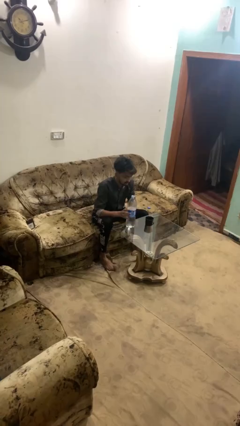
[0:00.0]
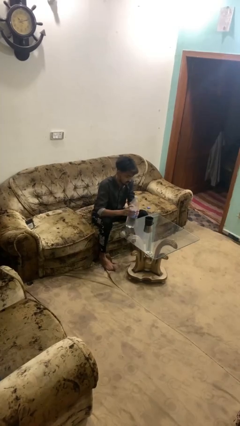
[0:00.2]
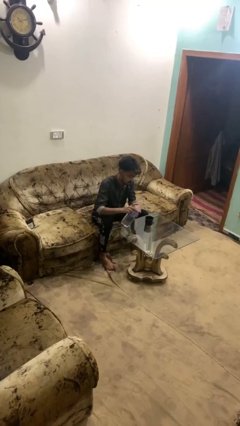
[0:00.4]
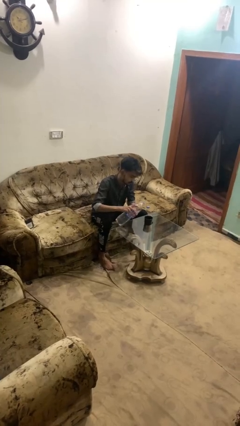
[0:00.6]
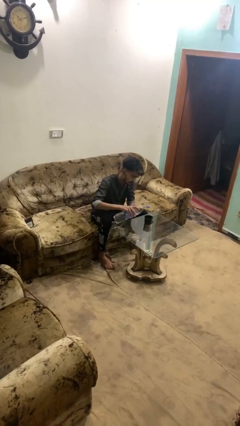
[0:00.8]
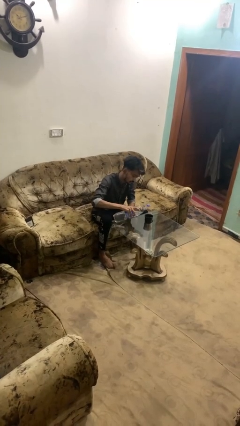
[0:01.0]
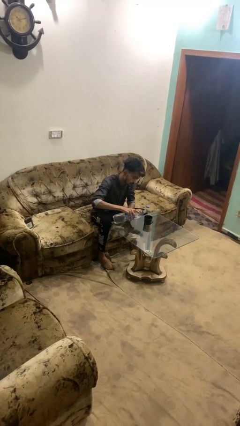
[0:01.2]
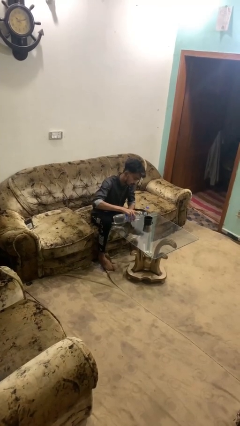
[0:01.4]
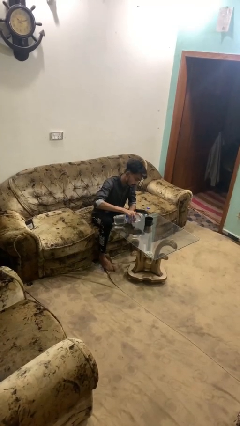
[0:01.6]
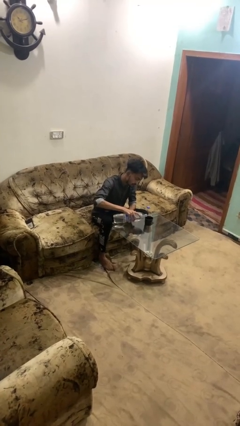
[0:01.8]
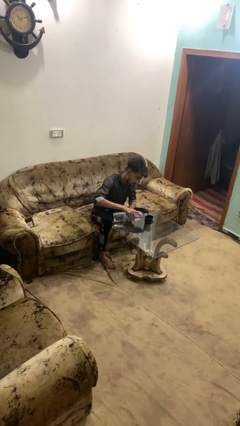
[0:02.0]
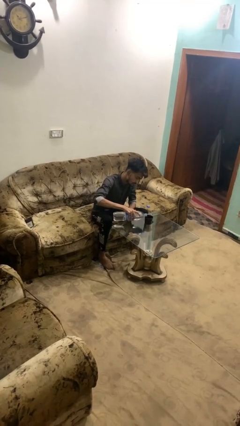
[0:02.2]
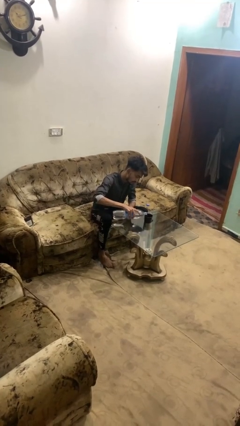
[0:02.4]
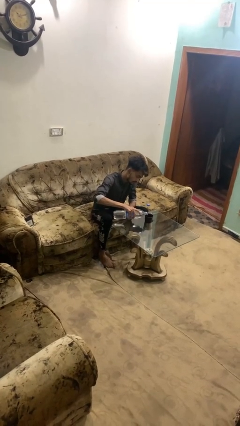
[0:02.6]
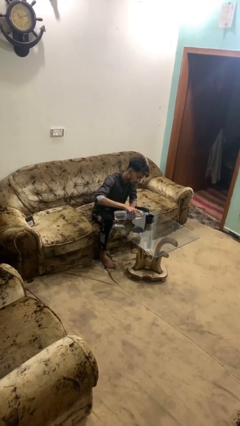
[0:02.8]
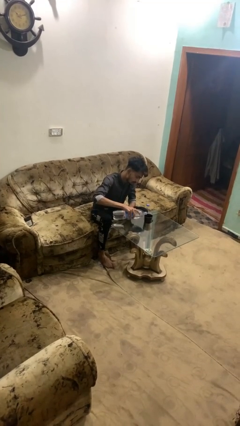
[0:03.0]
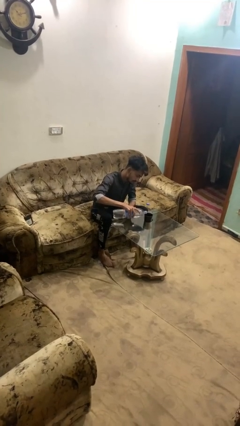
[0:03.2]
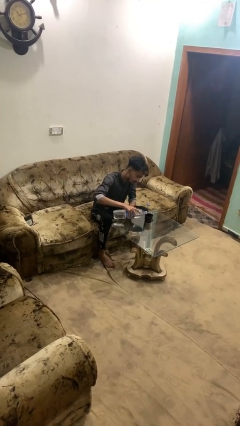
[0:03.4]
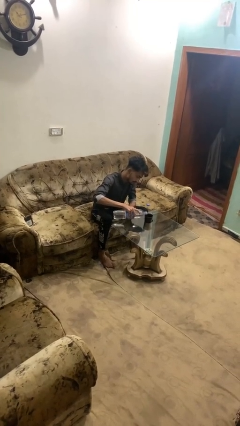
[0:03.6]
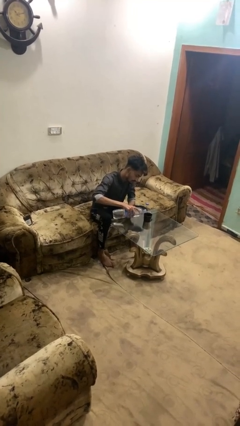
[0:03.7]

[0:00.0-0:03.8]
person pours liquid into cup
